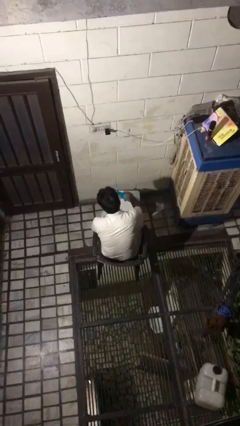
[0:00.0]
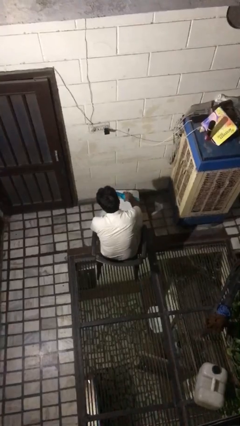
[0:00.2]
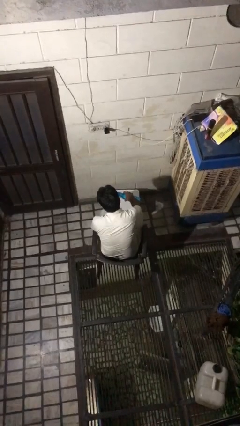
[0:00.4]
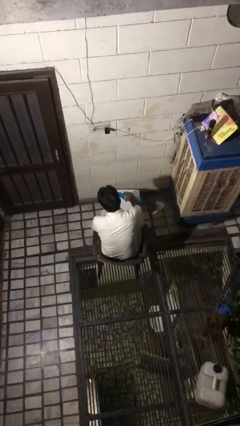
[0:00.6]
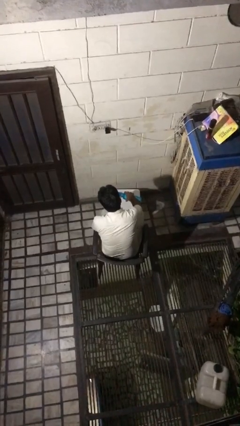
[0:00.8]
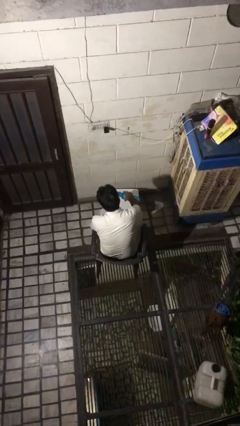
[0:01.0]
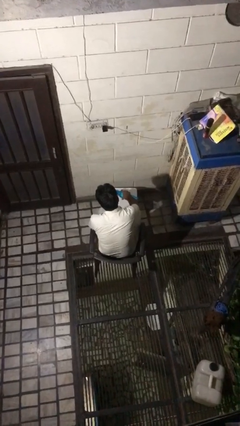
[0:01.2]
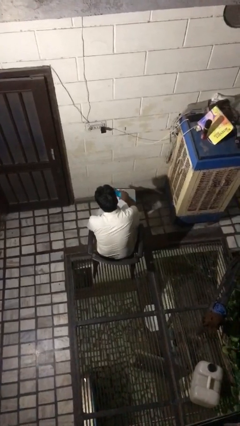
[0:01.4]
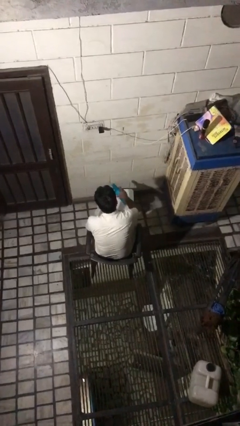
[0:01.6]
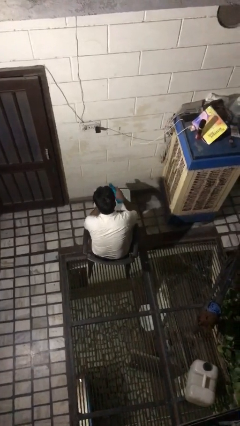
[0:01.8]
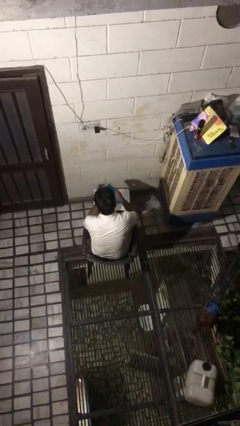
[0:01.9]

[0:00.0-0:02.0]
person pours liquid into cup

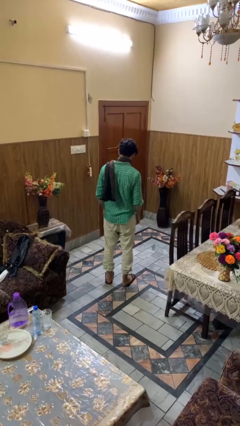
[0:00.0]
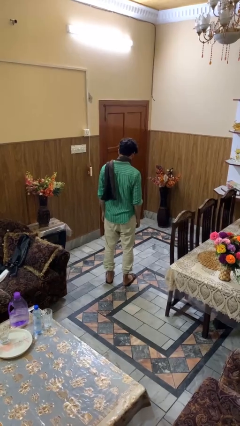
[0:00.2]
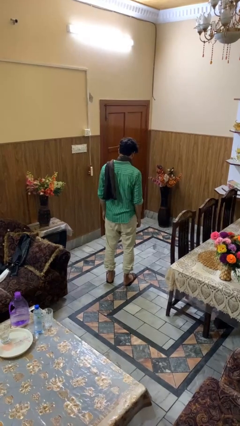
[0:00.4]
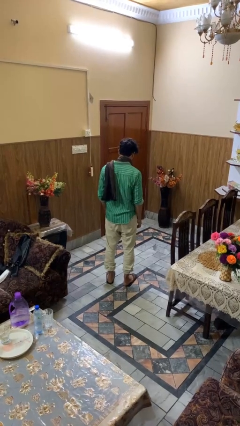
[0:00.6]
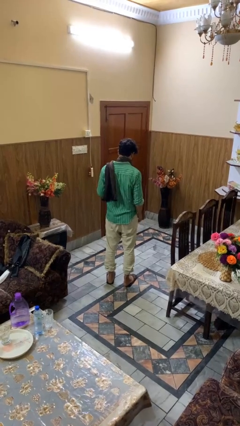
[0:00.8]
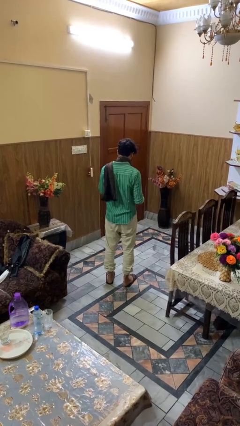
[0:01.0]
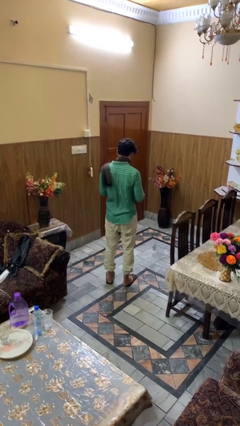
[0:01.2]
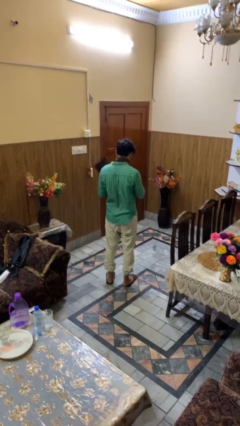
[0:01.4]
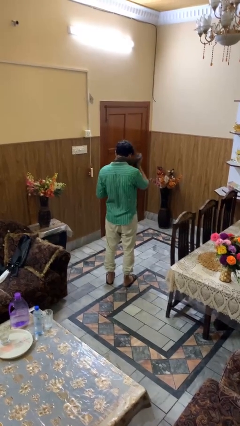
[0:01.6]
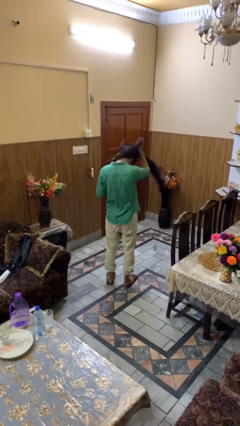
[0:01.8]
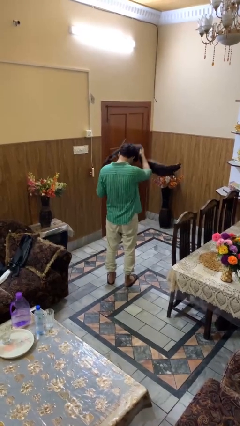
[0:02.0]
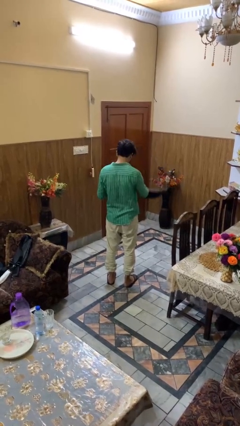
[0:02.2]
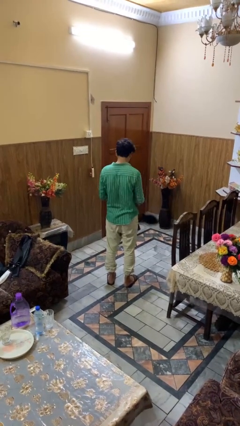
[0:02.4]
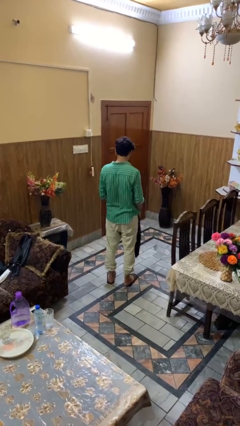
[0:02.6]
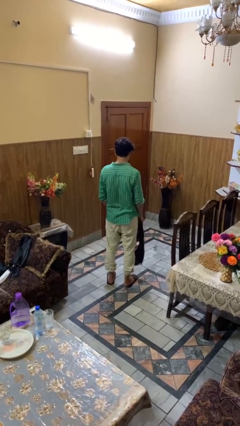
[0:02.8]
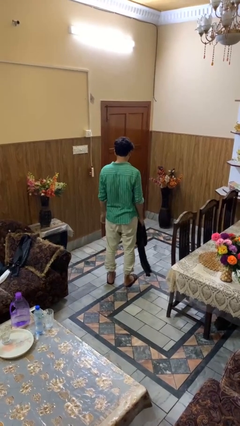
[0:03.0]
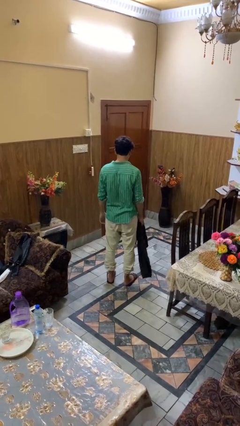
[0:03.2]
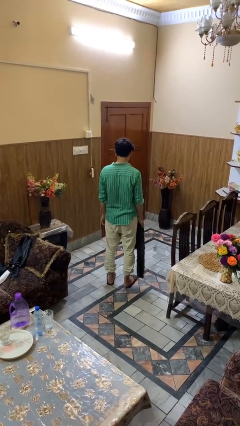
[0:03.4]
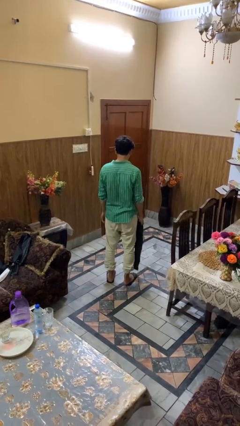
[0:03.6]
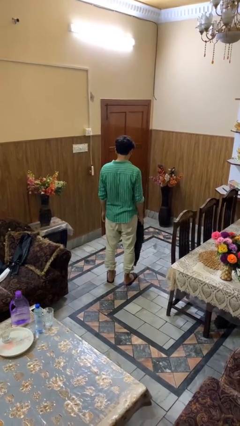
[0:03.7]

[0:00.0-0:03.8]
person takes off scarf

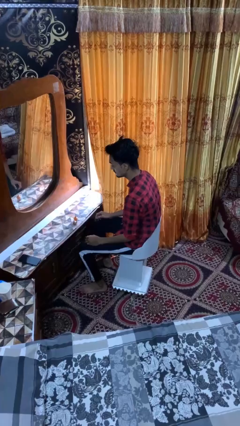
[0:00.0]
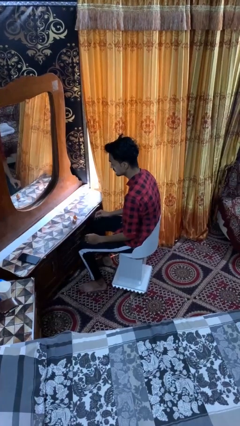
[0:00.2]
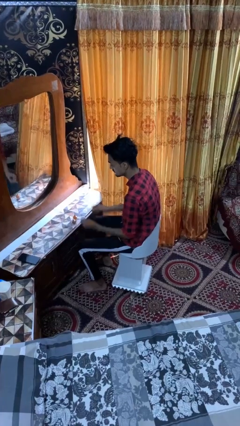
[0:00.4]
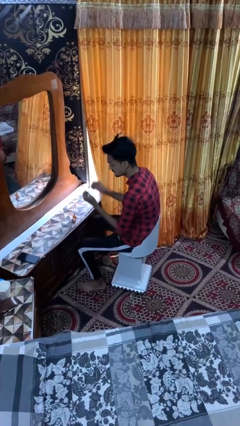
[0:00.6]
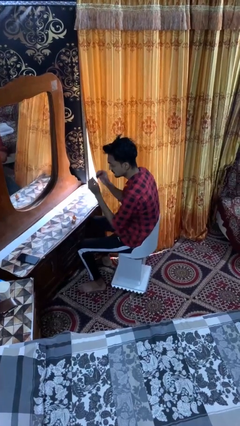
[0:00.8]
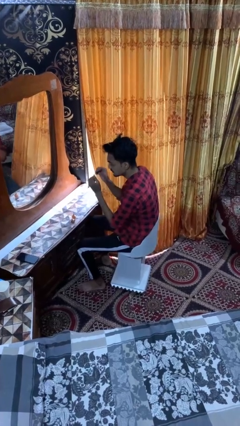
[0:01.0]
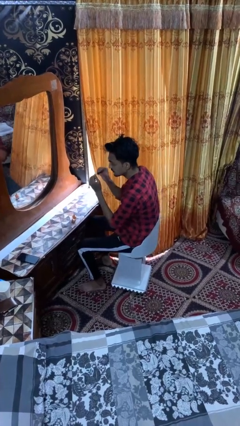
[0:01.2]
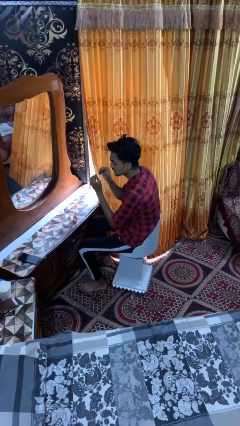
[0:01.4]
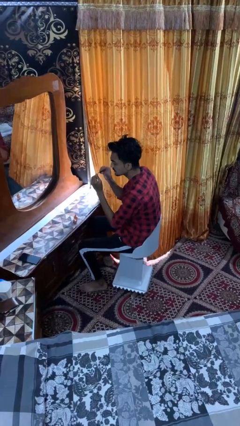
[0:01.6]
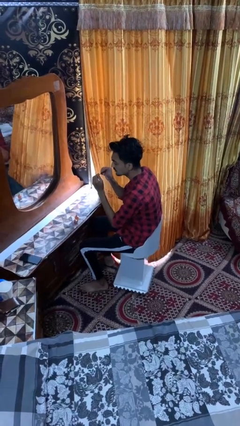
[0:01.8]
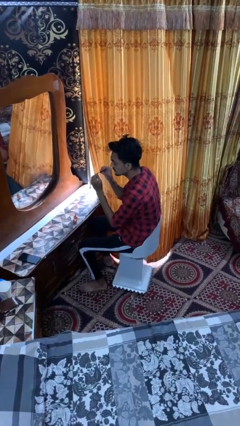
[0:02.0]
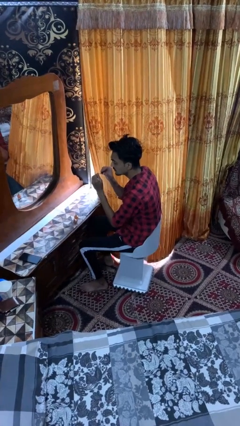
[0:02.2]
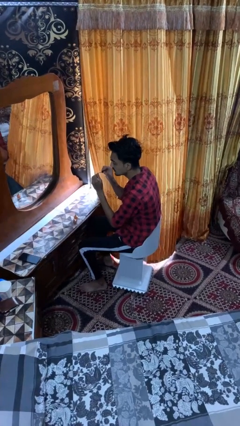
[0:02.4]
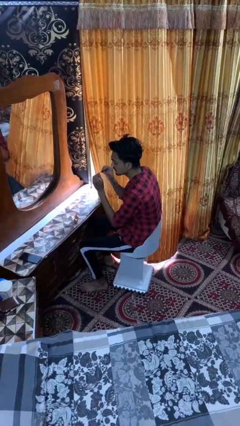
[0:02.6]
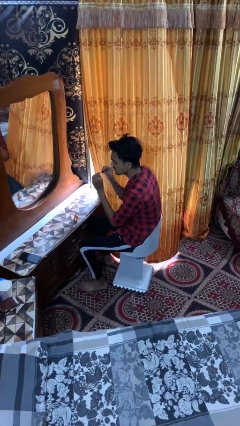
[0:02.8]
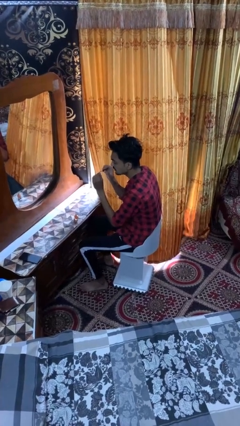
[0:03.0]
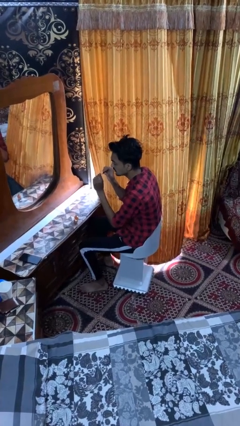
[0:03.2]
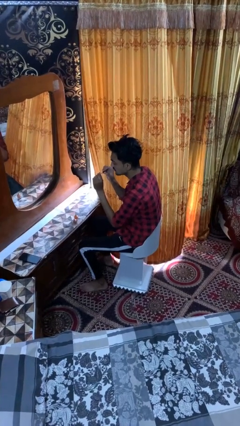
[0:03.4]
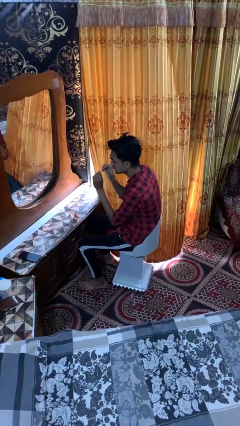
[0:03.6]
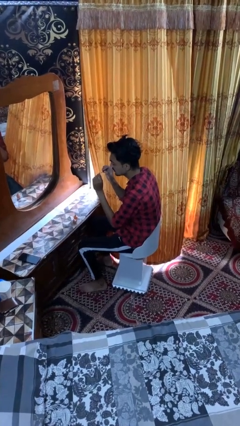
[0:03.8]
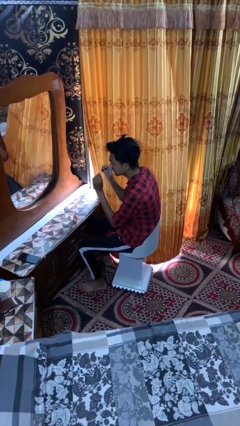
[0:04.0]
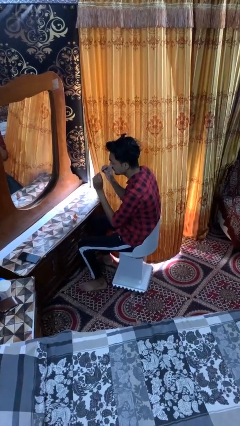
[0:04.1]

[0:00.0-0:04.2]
person paints fingernails

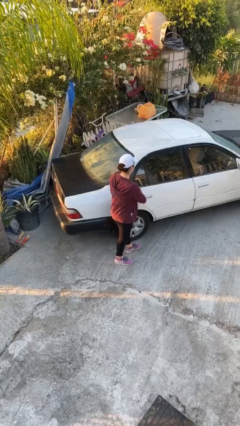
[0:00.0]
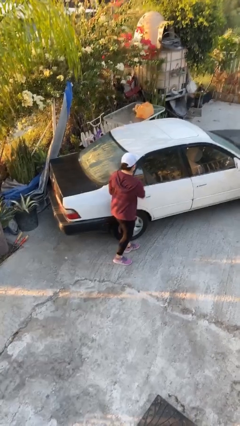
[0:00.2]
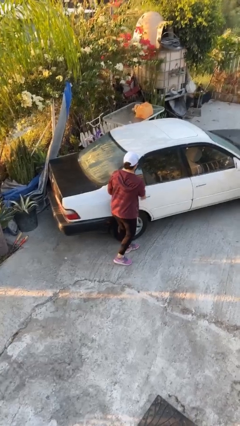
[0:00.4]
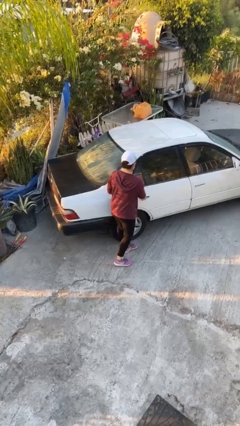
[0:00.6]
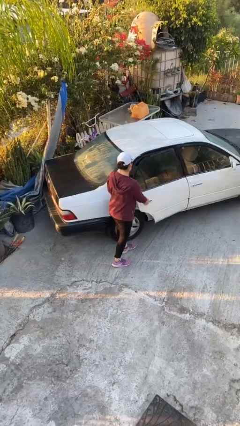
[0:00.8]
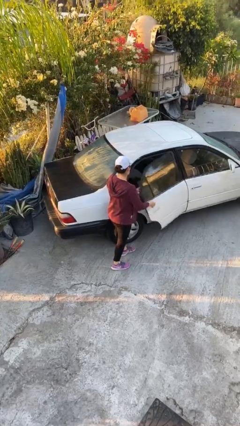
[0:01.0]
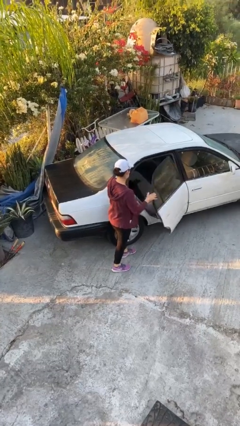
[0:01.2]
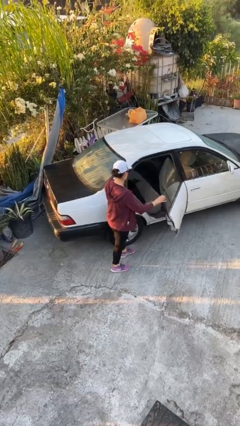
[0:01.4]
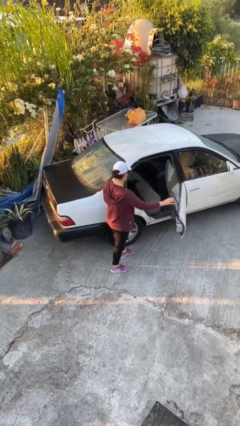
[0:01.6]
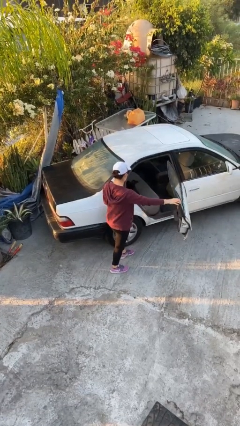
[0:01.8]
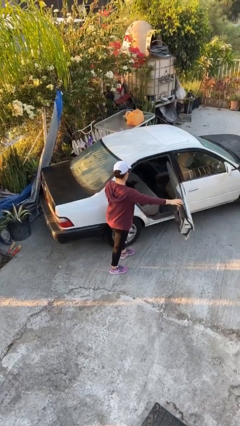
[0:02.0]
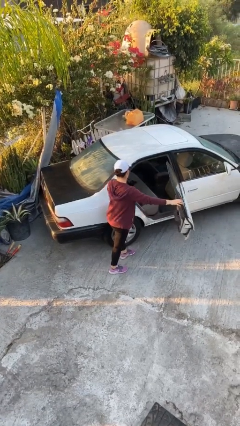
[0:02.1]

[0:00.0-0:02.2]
person opens car door

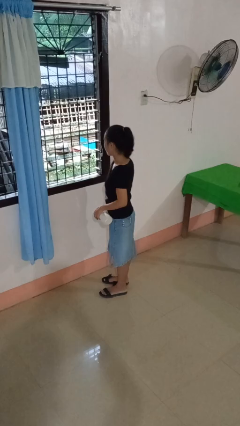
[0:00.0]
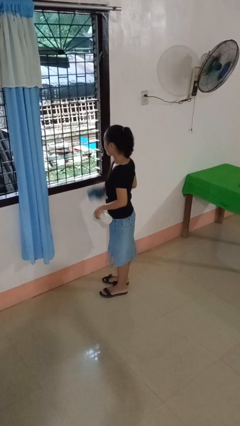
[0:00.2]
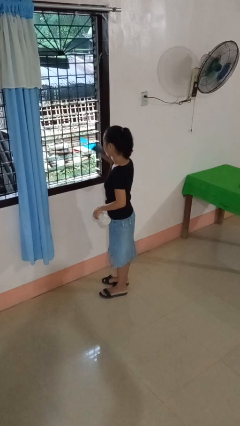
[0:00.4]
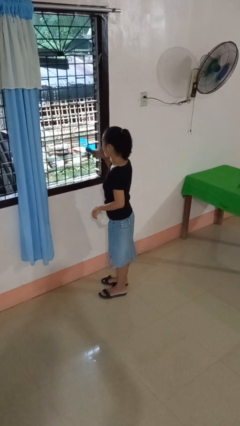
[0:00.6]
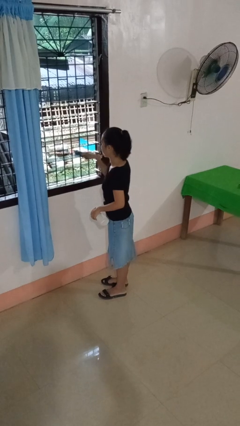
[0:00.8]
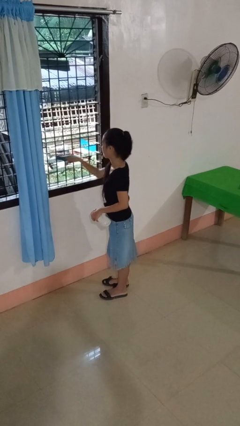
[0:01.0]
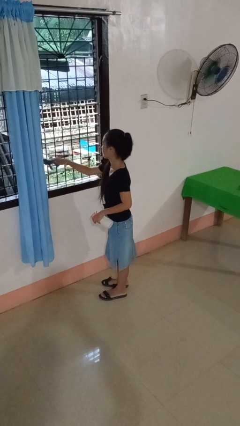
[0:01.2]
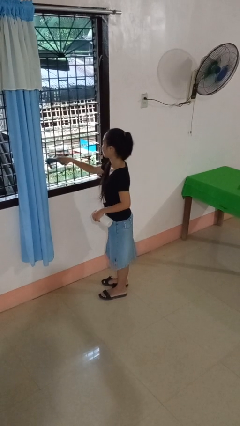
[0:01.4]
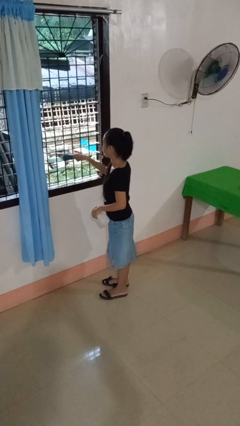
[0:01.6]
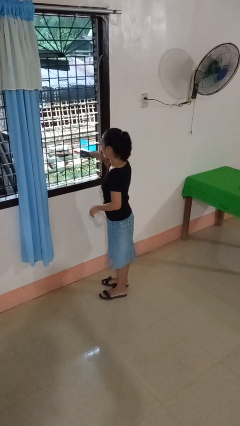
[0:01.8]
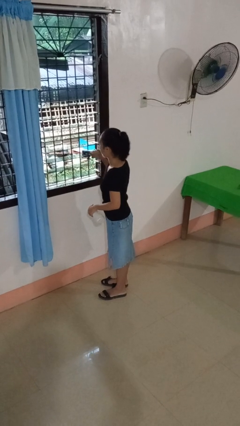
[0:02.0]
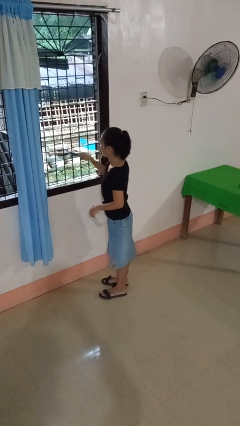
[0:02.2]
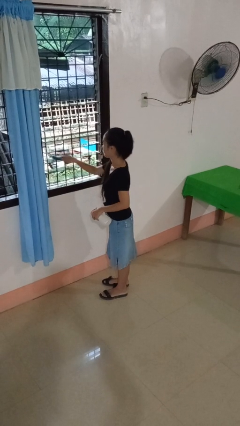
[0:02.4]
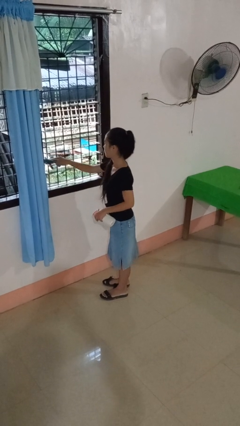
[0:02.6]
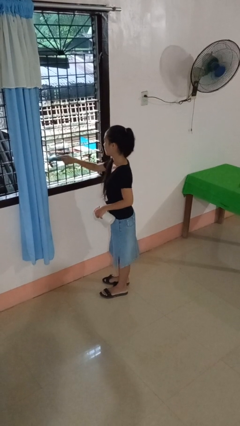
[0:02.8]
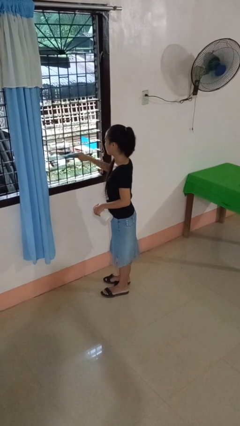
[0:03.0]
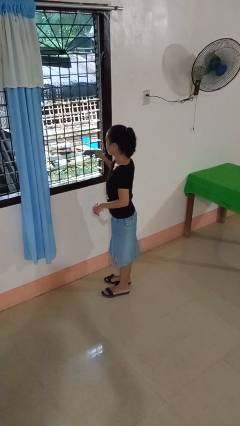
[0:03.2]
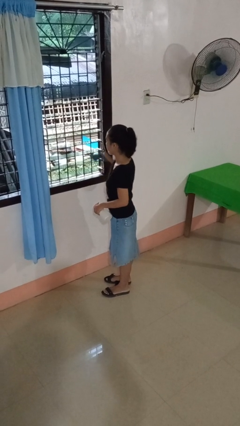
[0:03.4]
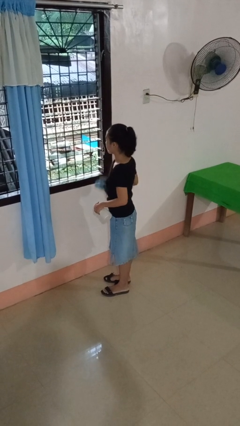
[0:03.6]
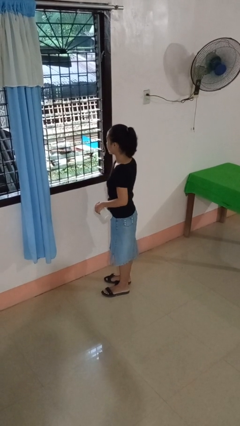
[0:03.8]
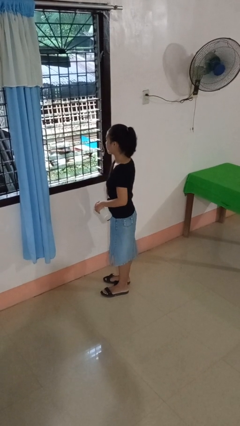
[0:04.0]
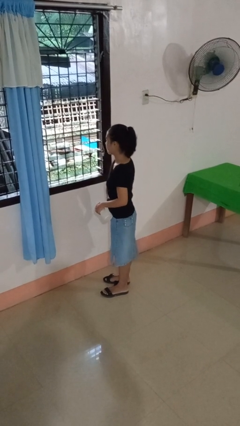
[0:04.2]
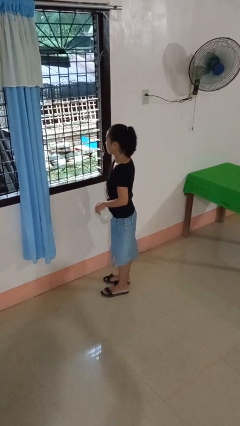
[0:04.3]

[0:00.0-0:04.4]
person washes window

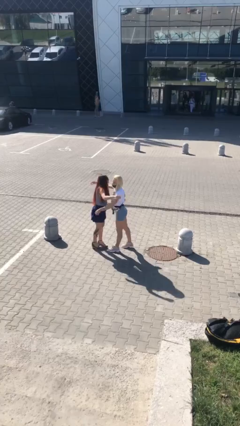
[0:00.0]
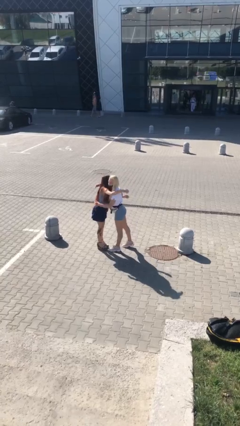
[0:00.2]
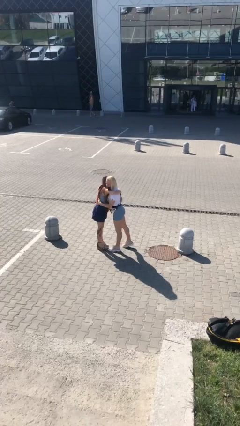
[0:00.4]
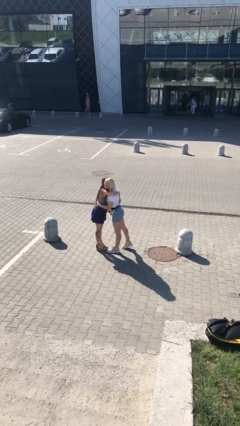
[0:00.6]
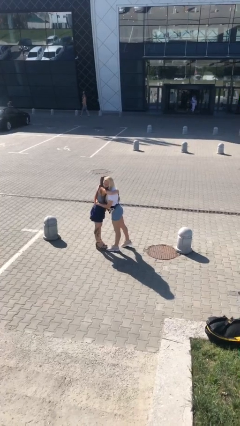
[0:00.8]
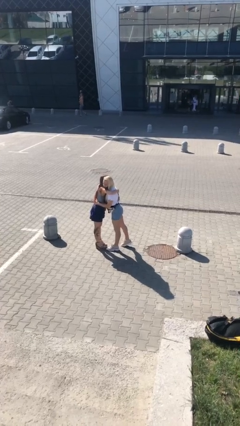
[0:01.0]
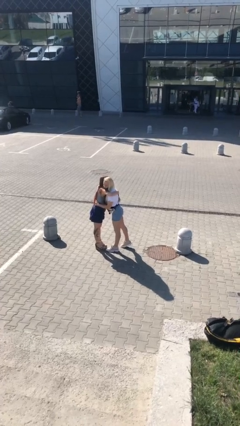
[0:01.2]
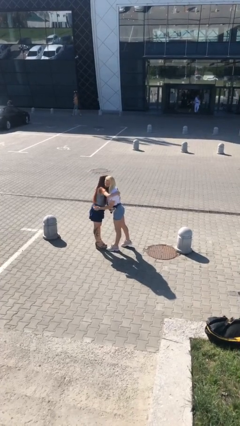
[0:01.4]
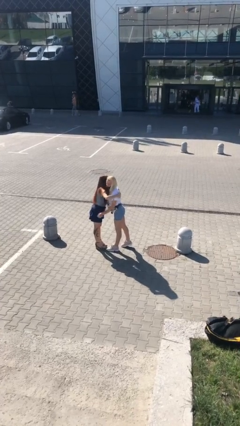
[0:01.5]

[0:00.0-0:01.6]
person embraces person
